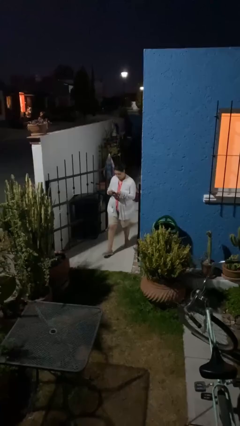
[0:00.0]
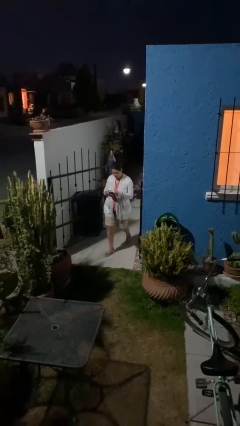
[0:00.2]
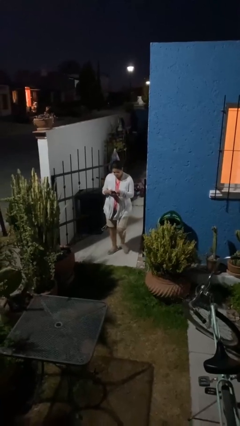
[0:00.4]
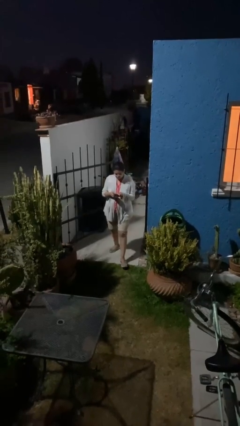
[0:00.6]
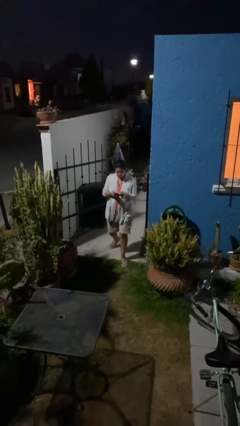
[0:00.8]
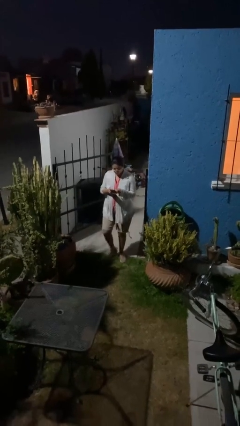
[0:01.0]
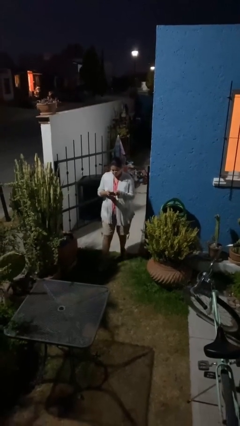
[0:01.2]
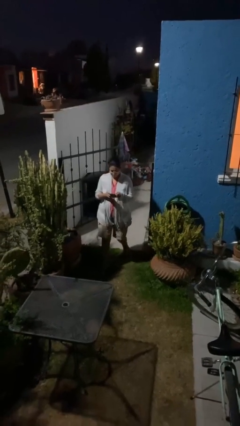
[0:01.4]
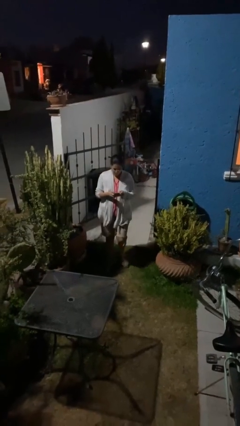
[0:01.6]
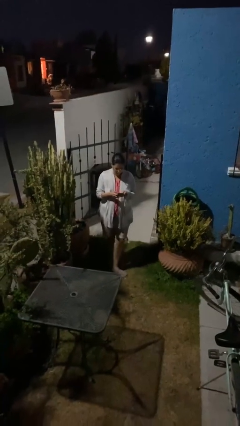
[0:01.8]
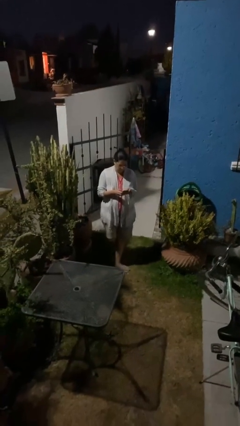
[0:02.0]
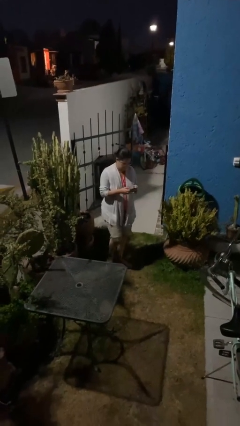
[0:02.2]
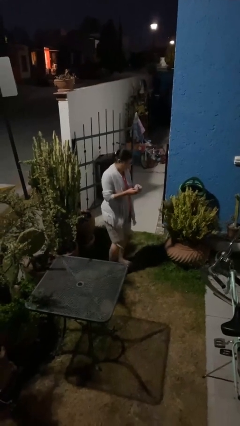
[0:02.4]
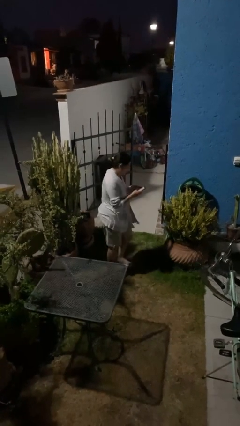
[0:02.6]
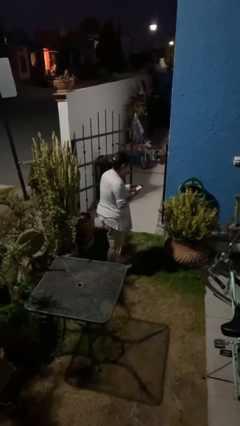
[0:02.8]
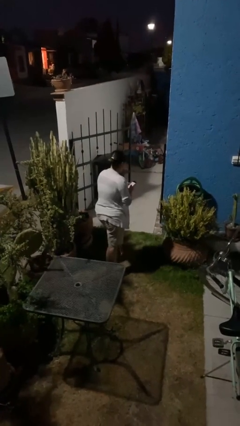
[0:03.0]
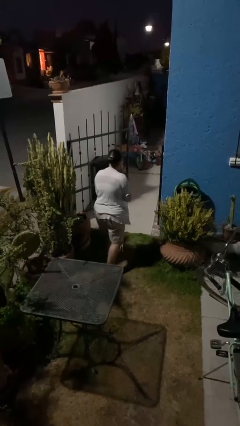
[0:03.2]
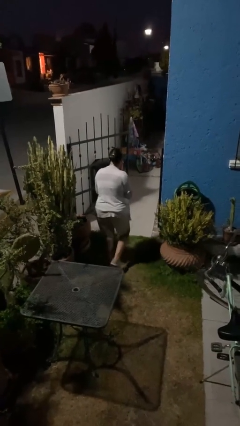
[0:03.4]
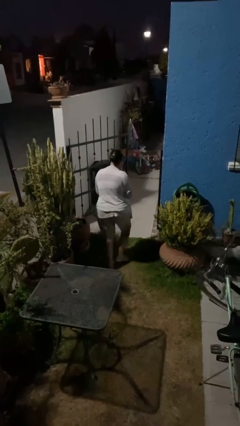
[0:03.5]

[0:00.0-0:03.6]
person enters scene through structure

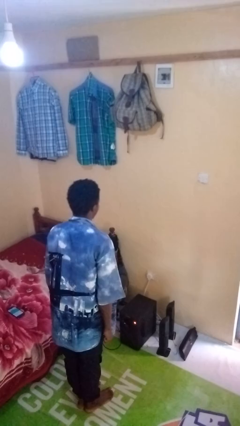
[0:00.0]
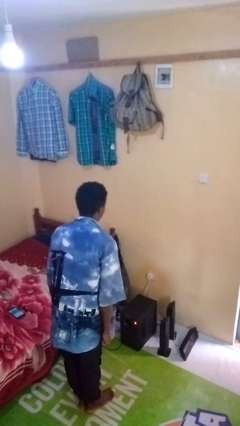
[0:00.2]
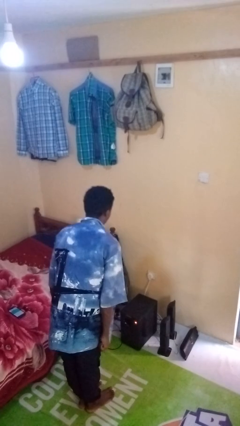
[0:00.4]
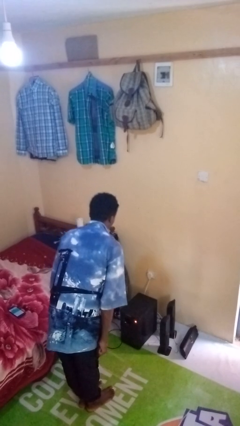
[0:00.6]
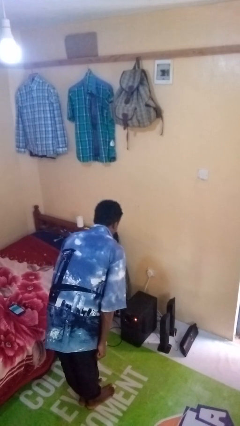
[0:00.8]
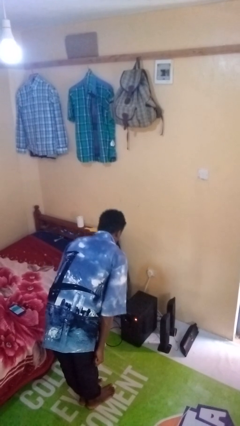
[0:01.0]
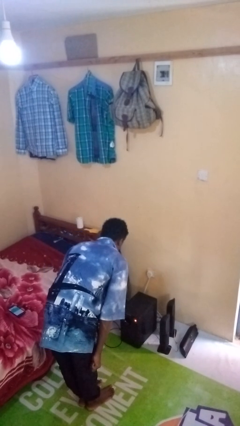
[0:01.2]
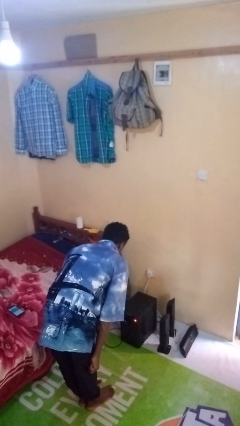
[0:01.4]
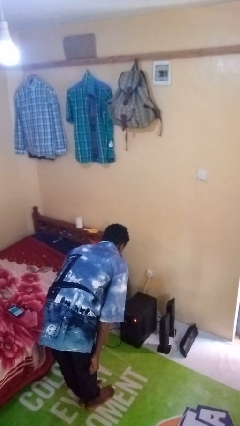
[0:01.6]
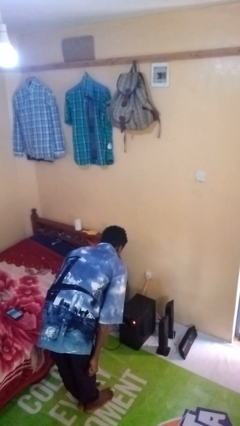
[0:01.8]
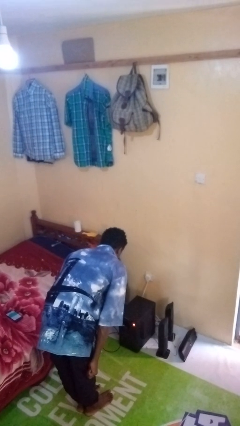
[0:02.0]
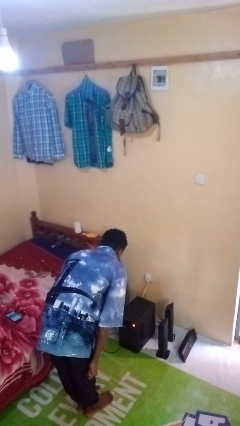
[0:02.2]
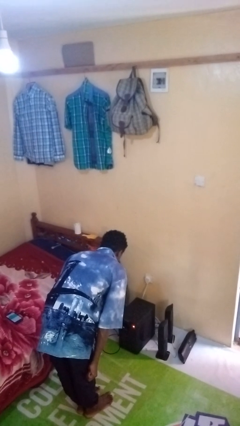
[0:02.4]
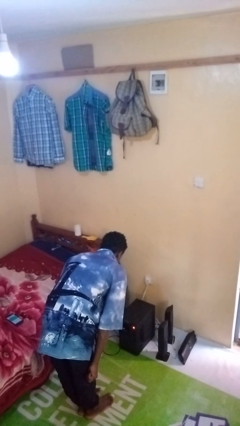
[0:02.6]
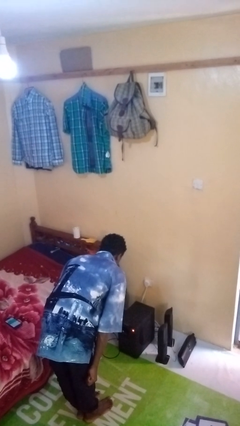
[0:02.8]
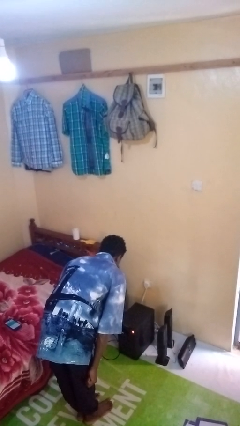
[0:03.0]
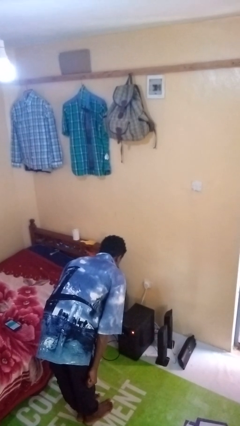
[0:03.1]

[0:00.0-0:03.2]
person bows

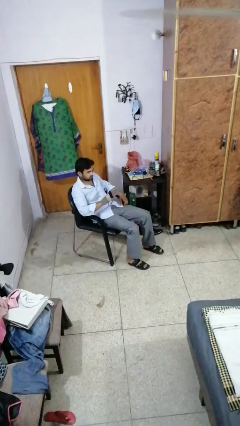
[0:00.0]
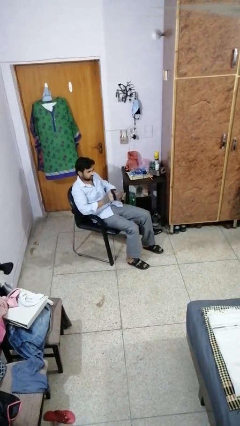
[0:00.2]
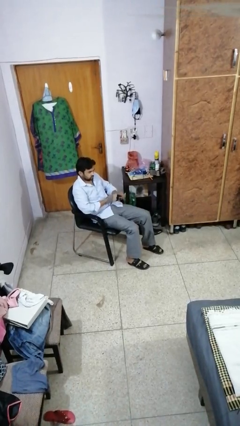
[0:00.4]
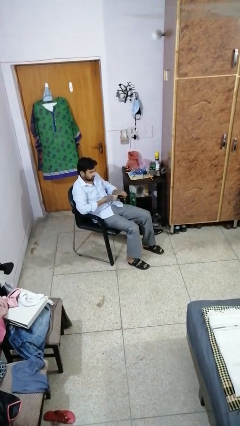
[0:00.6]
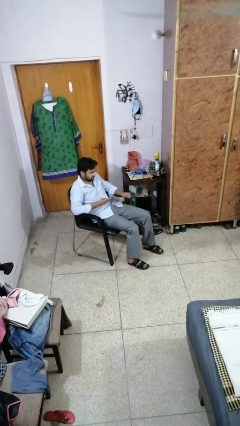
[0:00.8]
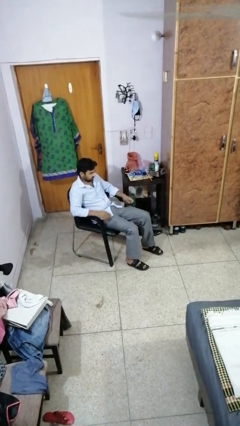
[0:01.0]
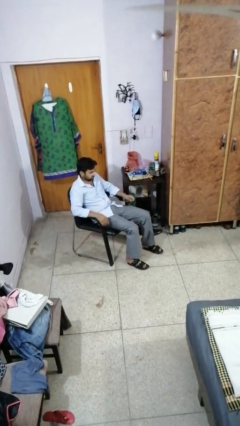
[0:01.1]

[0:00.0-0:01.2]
person takes off gloves

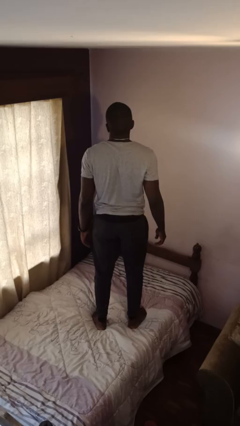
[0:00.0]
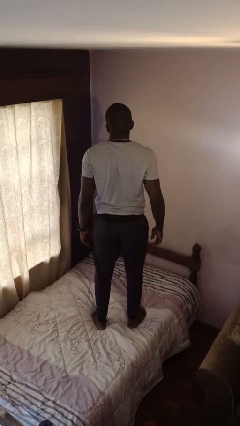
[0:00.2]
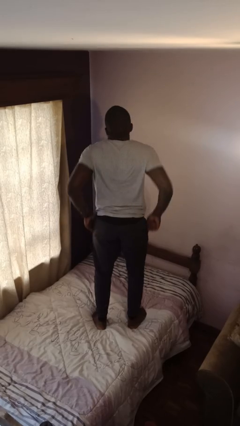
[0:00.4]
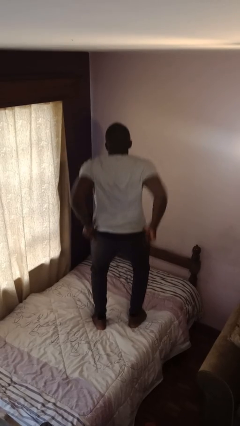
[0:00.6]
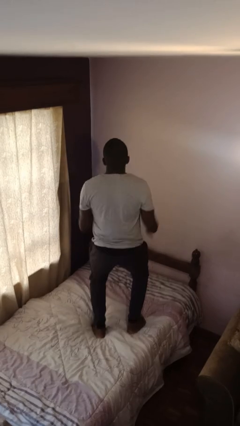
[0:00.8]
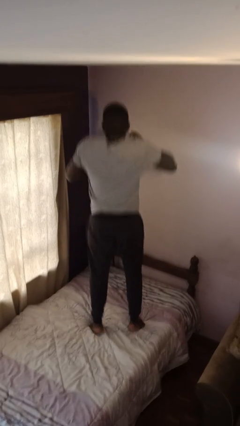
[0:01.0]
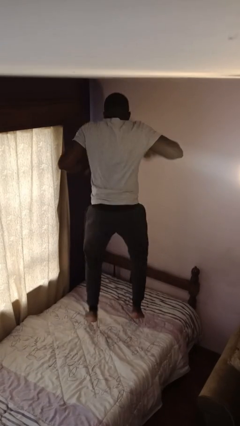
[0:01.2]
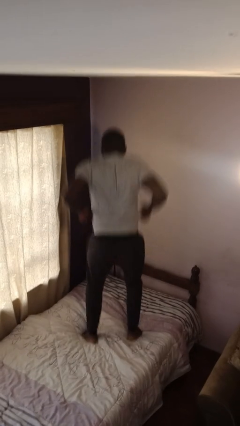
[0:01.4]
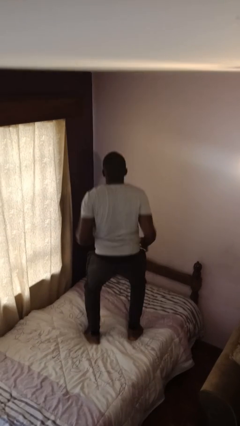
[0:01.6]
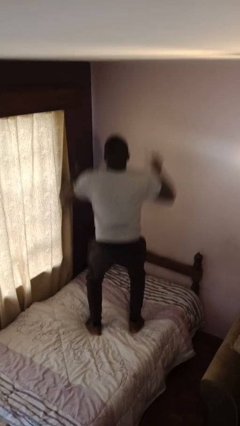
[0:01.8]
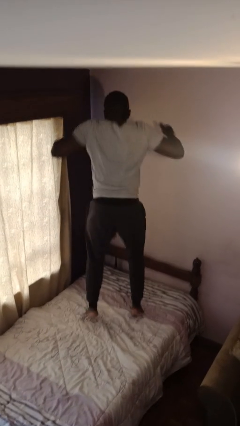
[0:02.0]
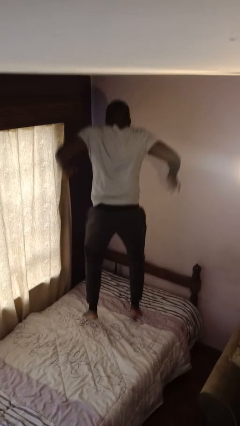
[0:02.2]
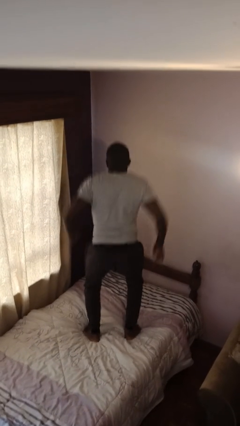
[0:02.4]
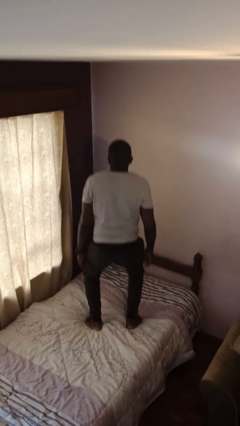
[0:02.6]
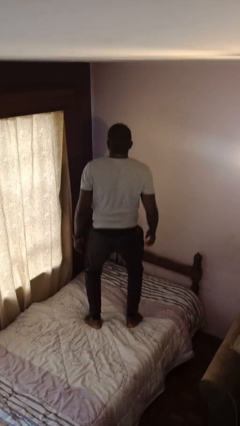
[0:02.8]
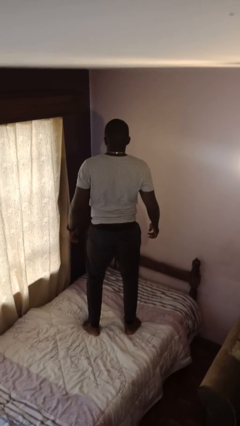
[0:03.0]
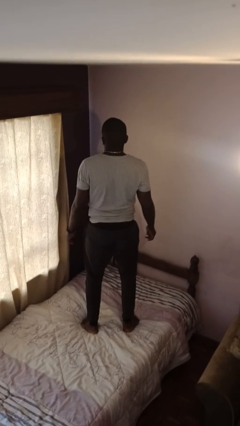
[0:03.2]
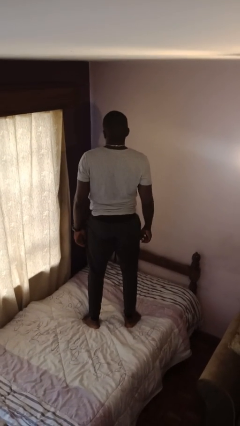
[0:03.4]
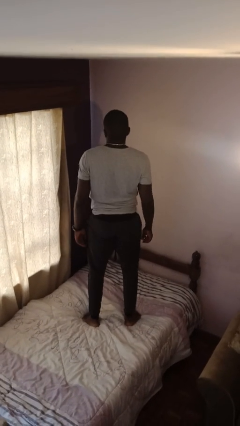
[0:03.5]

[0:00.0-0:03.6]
person jumps on bed

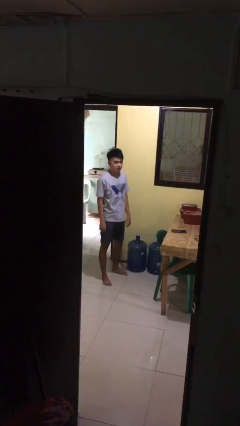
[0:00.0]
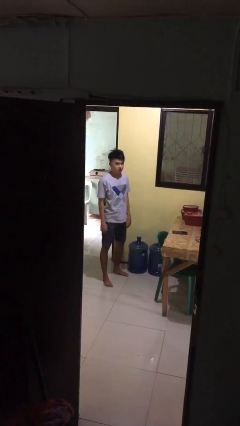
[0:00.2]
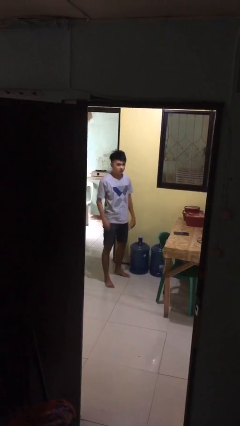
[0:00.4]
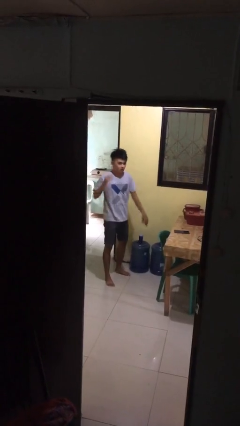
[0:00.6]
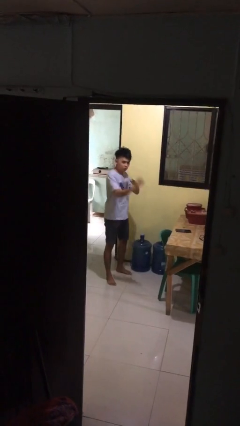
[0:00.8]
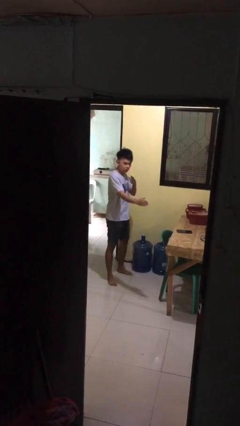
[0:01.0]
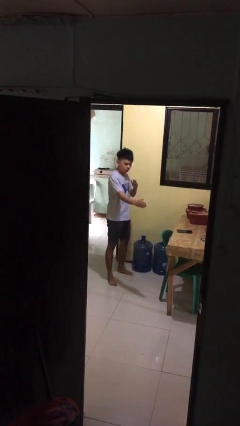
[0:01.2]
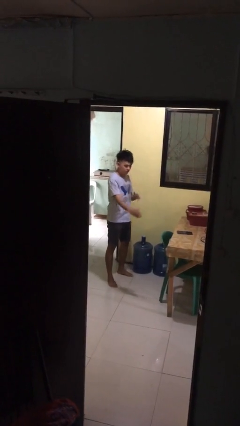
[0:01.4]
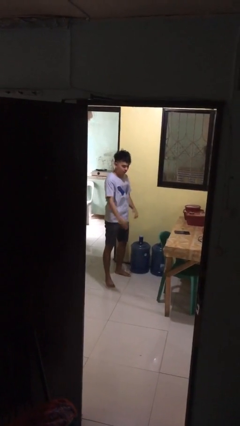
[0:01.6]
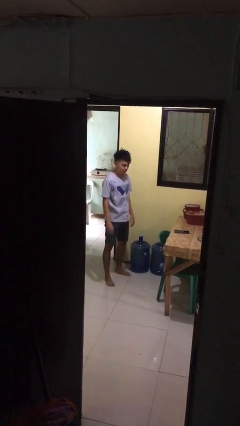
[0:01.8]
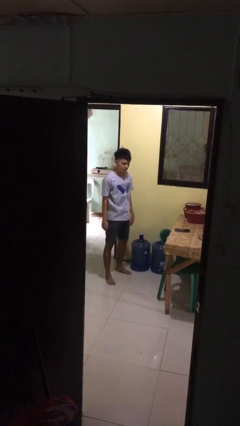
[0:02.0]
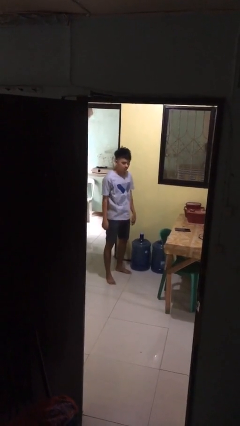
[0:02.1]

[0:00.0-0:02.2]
person karate chop

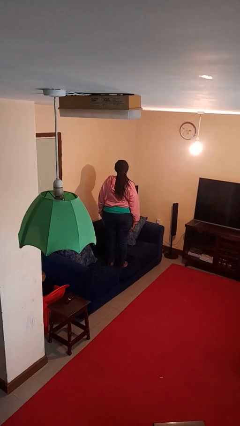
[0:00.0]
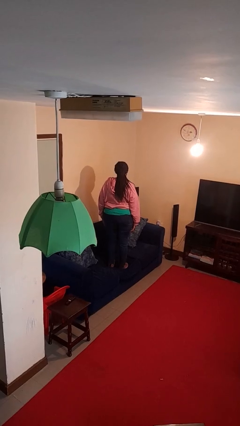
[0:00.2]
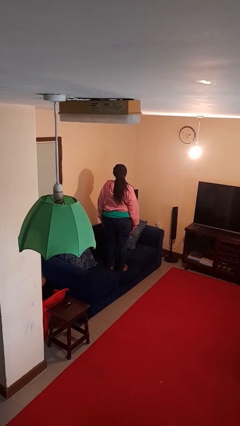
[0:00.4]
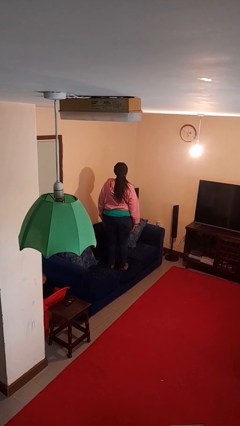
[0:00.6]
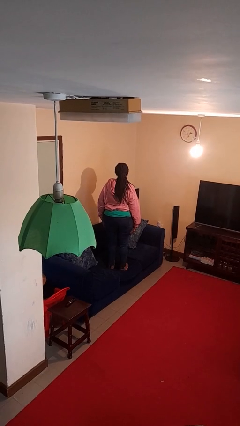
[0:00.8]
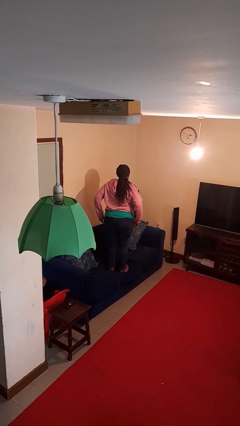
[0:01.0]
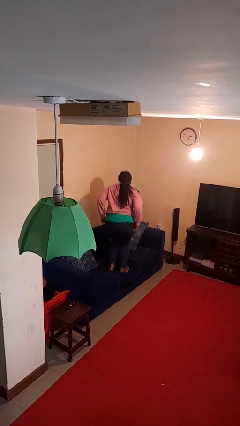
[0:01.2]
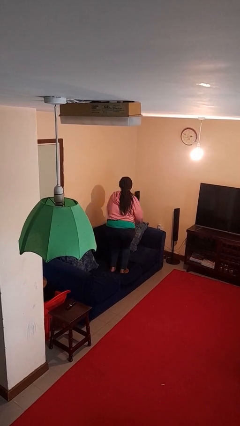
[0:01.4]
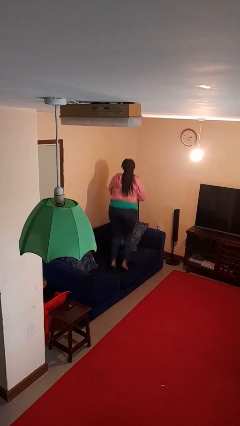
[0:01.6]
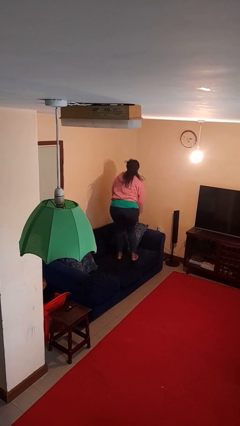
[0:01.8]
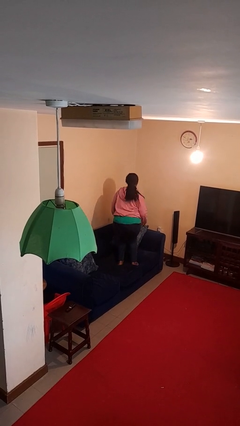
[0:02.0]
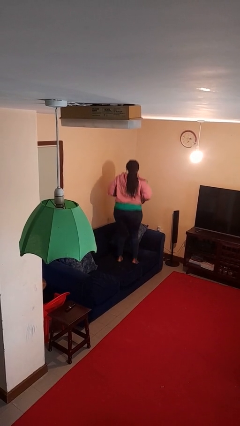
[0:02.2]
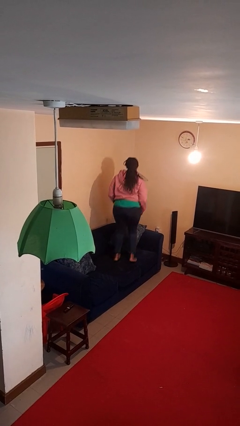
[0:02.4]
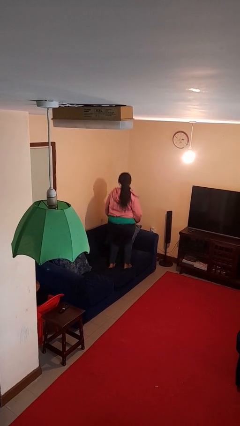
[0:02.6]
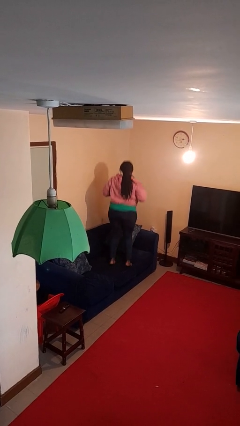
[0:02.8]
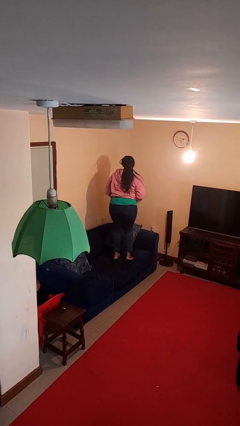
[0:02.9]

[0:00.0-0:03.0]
person jumps on couch

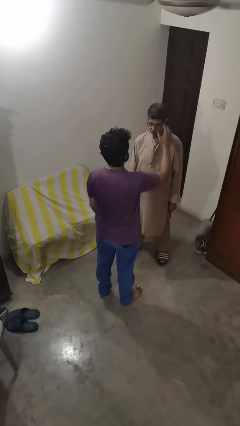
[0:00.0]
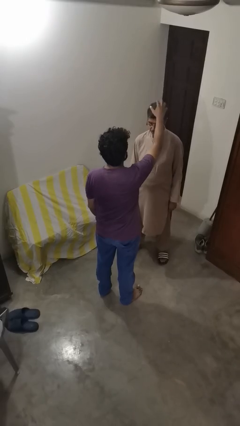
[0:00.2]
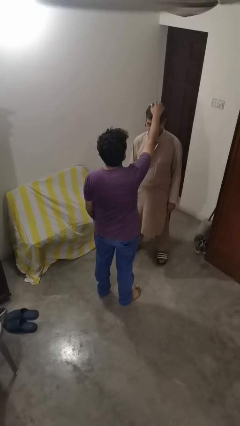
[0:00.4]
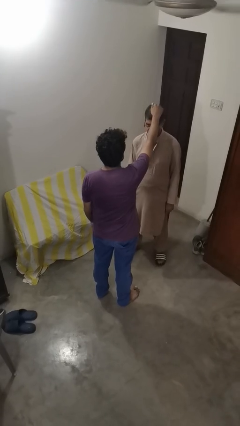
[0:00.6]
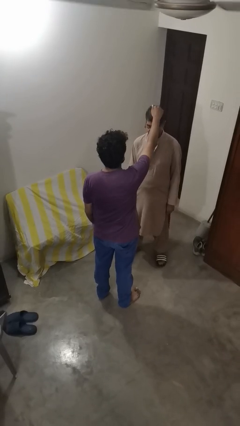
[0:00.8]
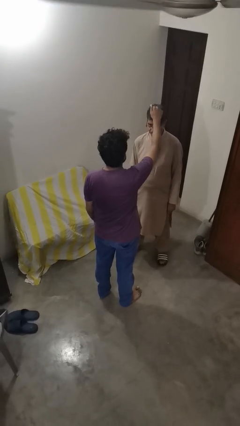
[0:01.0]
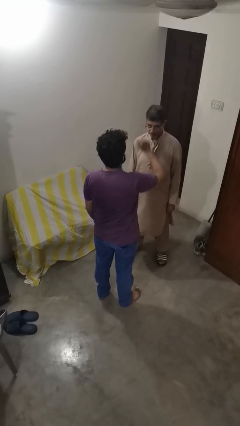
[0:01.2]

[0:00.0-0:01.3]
person grabs person by hair
